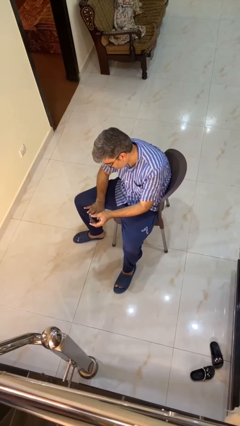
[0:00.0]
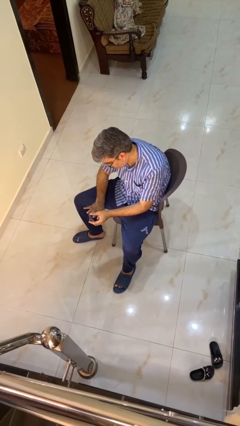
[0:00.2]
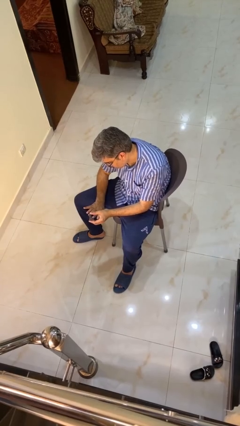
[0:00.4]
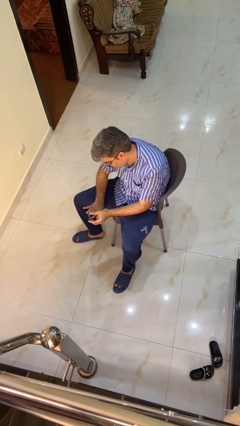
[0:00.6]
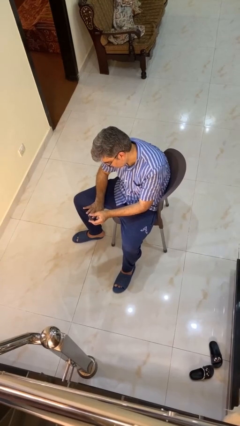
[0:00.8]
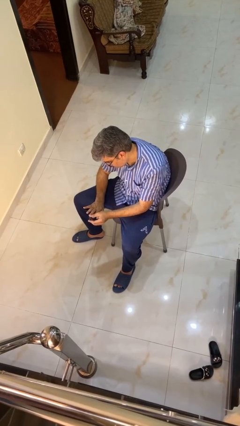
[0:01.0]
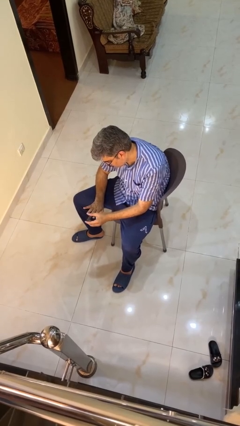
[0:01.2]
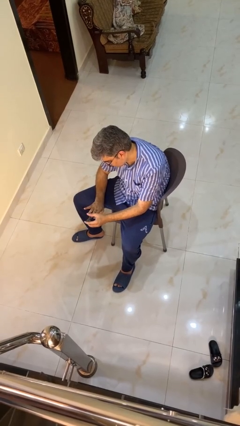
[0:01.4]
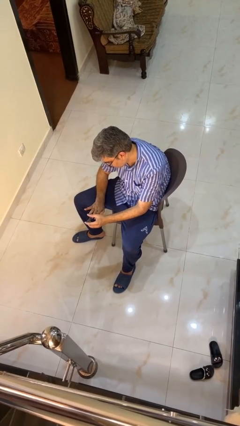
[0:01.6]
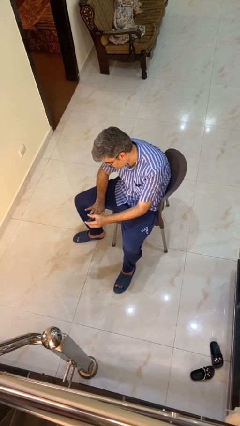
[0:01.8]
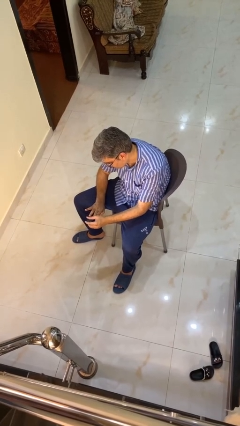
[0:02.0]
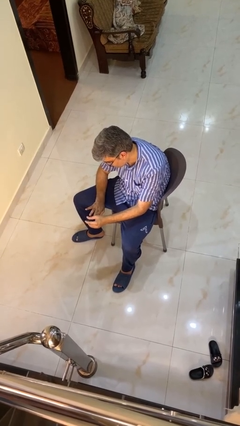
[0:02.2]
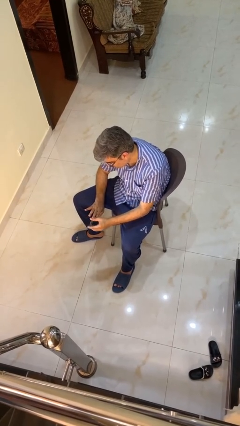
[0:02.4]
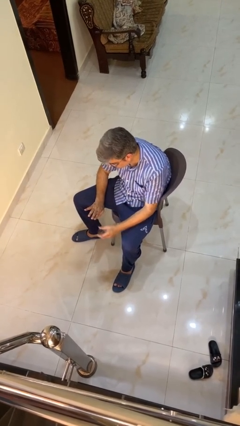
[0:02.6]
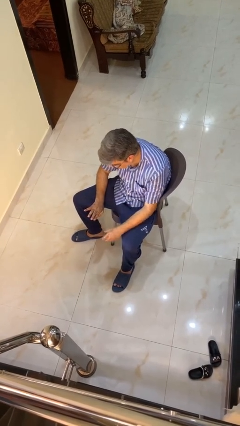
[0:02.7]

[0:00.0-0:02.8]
person clips fingernails

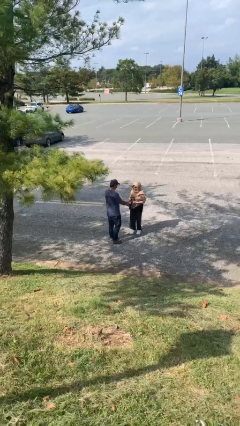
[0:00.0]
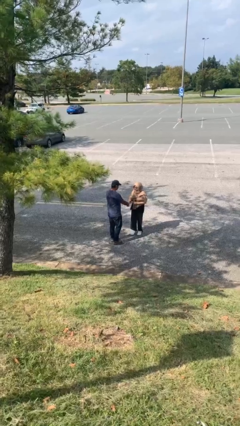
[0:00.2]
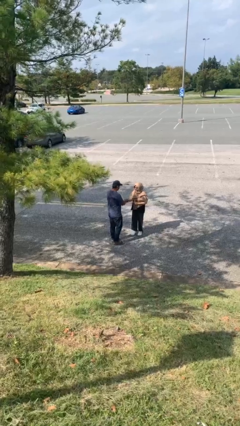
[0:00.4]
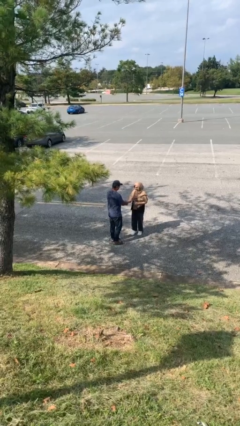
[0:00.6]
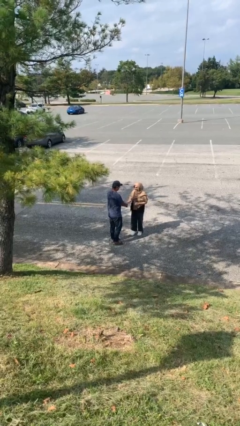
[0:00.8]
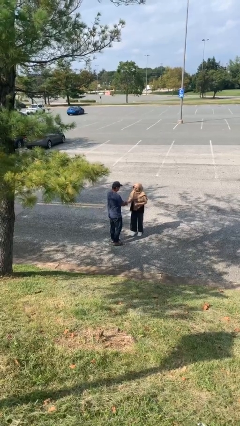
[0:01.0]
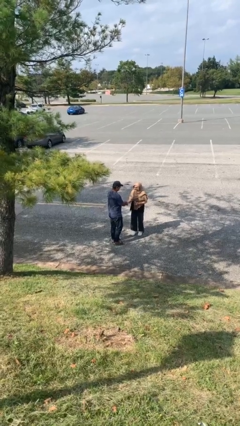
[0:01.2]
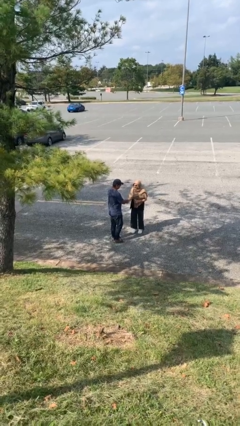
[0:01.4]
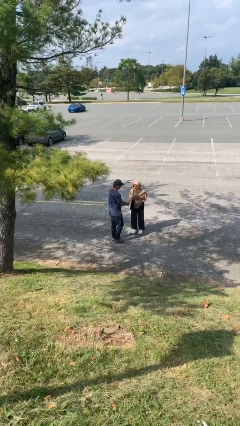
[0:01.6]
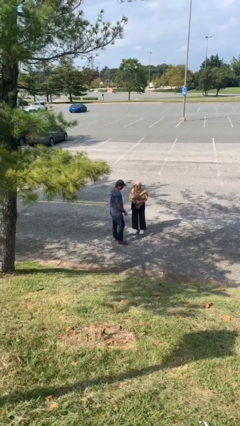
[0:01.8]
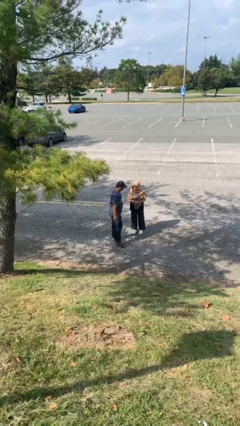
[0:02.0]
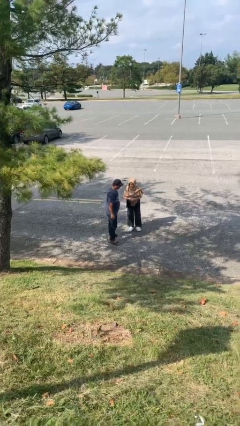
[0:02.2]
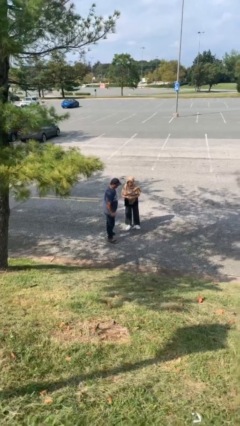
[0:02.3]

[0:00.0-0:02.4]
person shakes hand

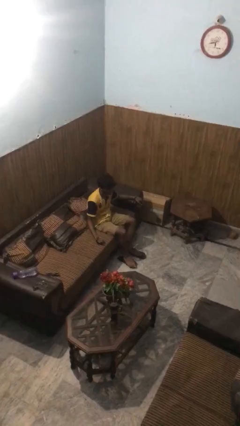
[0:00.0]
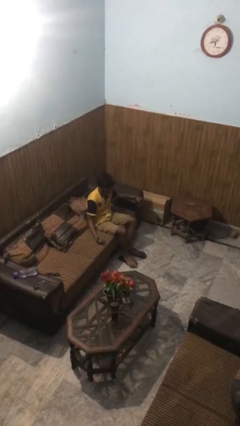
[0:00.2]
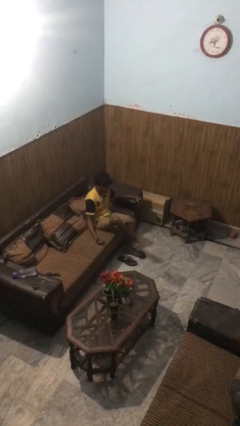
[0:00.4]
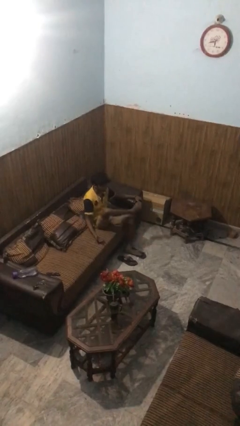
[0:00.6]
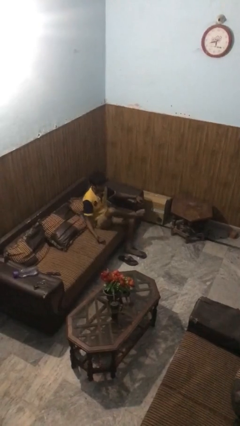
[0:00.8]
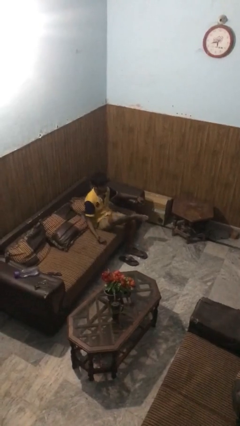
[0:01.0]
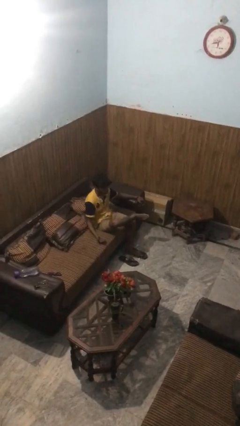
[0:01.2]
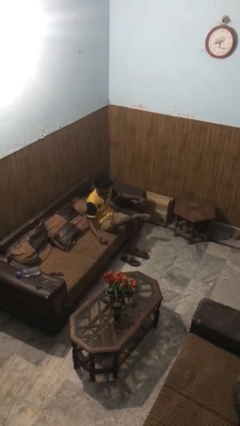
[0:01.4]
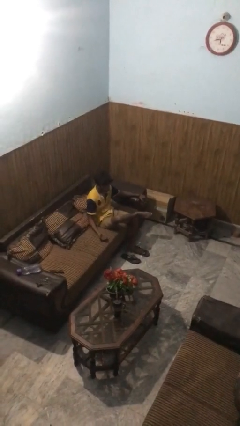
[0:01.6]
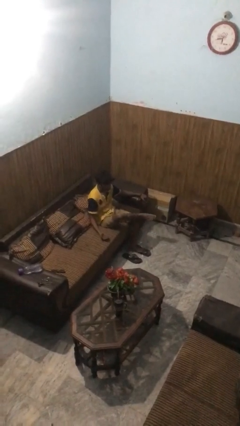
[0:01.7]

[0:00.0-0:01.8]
person crosses legs

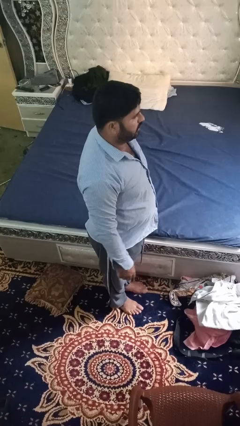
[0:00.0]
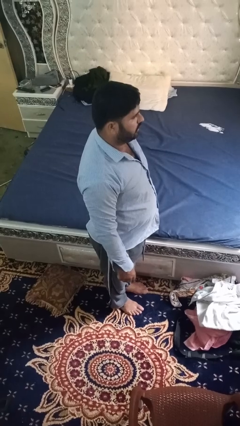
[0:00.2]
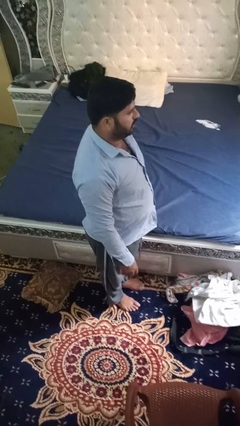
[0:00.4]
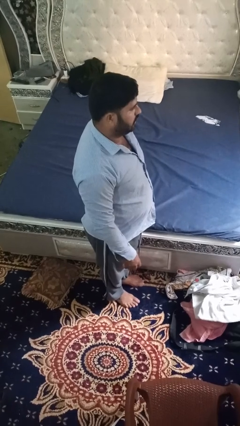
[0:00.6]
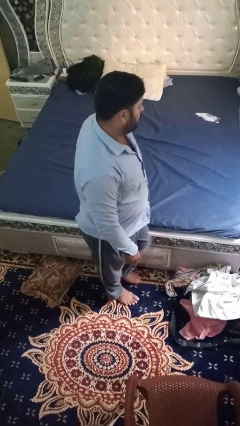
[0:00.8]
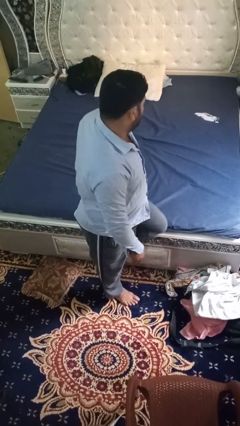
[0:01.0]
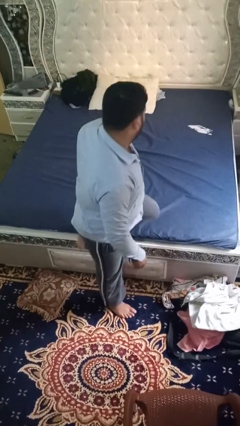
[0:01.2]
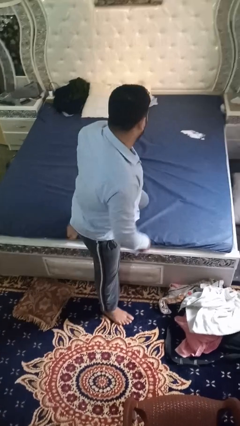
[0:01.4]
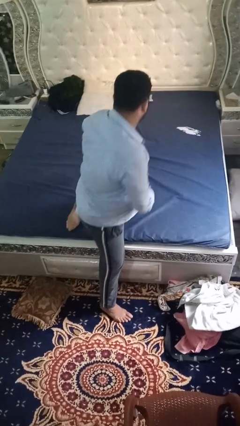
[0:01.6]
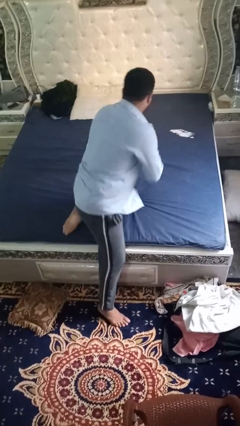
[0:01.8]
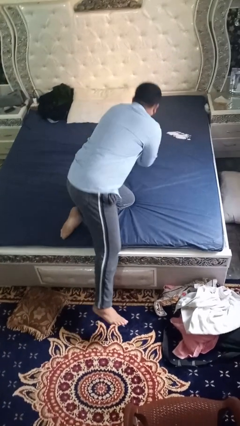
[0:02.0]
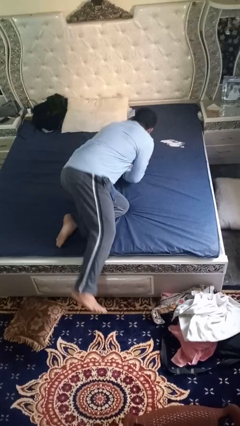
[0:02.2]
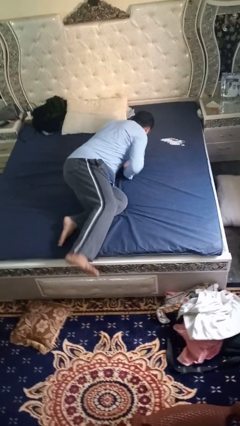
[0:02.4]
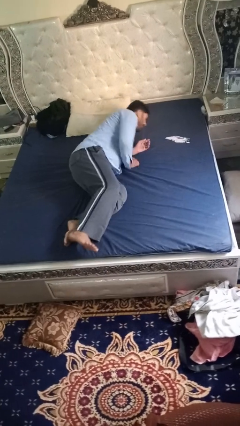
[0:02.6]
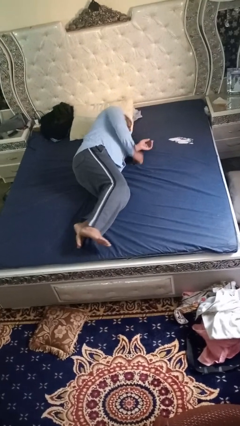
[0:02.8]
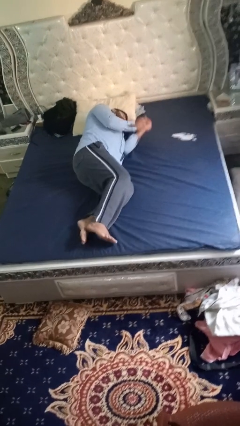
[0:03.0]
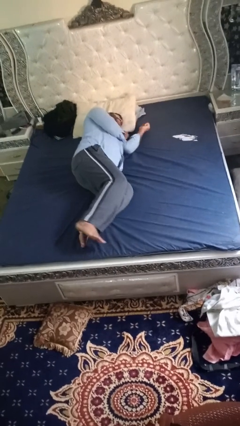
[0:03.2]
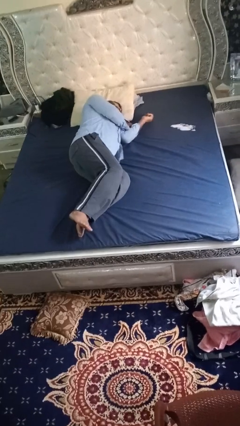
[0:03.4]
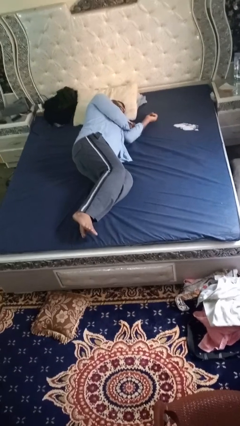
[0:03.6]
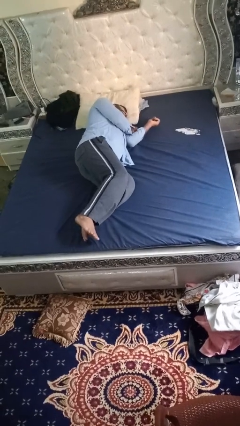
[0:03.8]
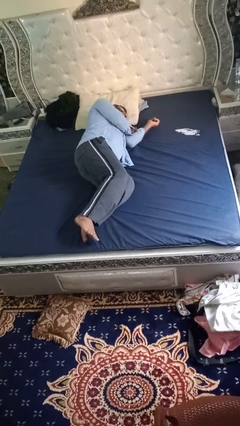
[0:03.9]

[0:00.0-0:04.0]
person lies down on bed

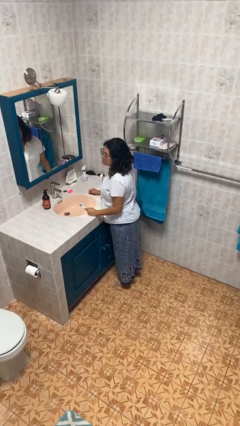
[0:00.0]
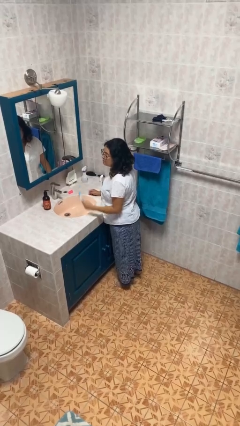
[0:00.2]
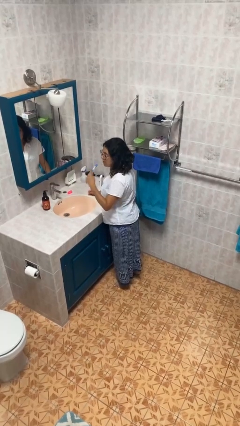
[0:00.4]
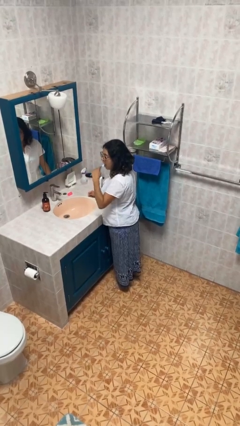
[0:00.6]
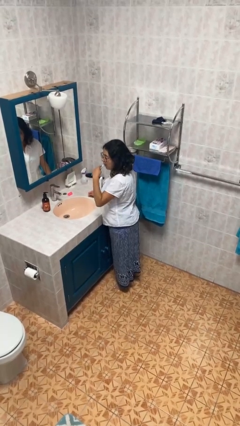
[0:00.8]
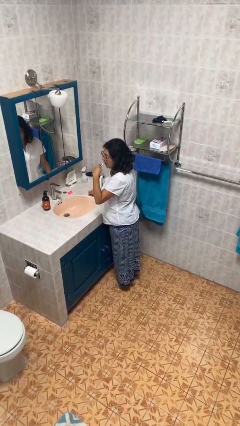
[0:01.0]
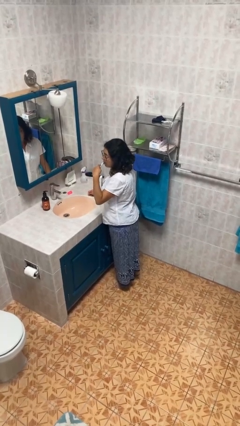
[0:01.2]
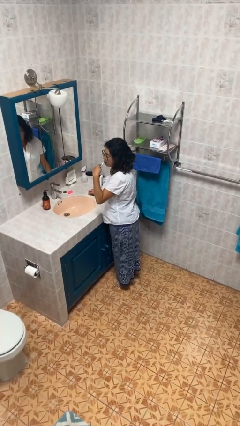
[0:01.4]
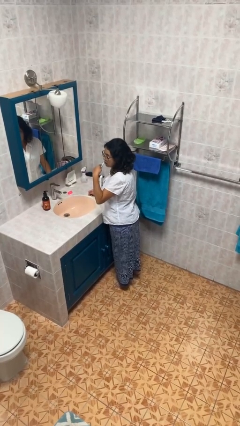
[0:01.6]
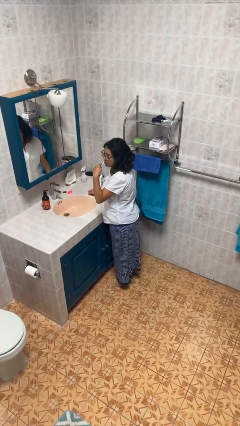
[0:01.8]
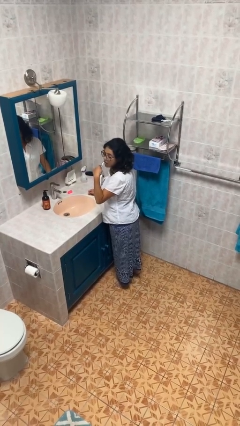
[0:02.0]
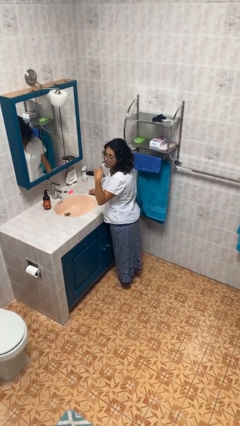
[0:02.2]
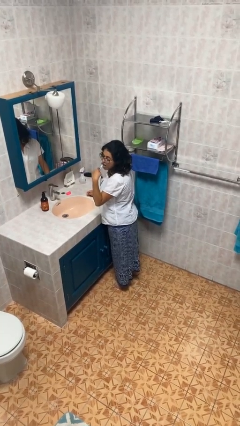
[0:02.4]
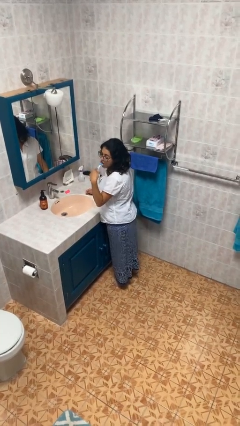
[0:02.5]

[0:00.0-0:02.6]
person brushes teeth

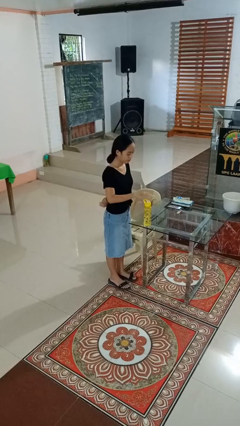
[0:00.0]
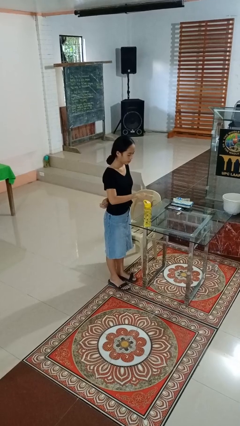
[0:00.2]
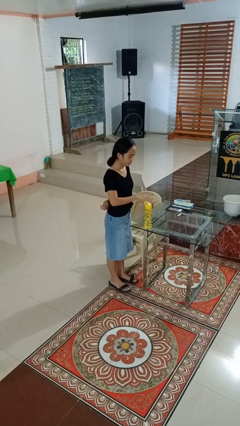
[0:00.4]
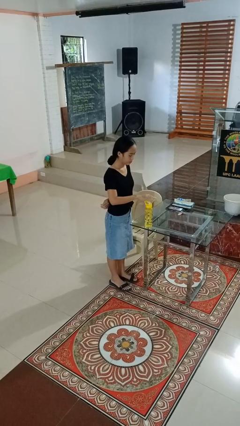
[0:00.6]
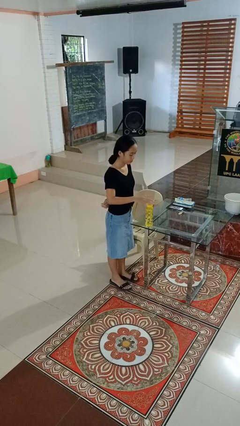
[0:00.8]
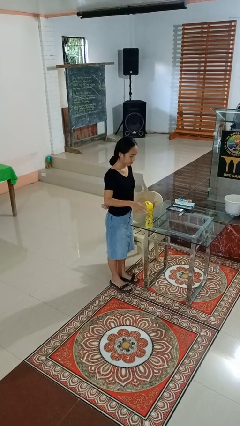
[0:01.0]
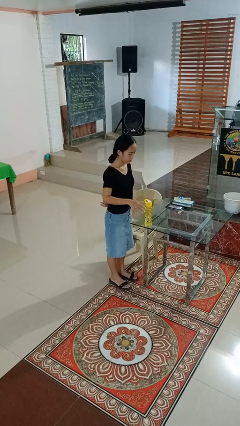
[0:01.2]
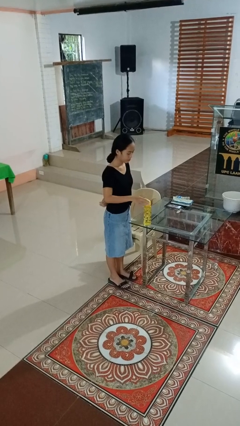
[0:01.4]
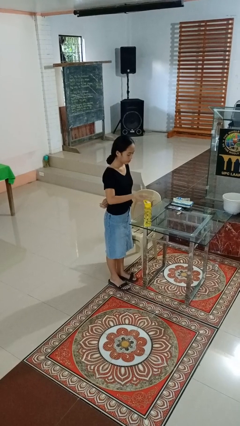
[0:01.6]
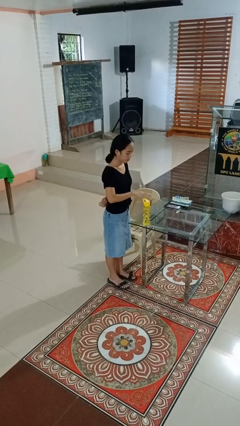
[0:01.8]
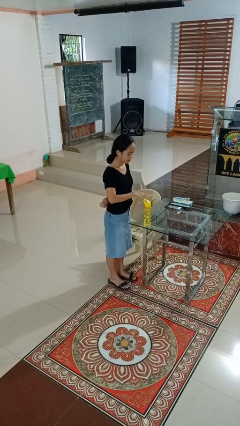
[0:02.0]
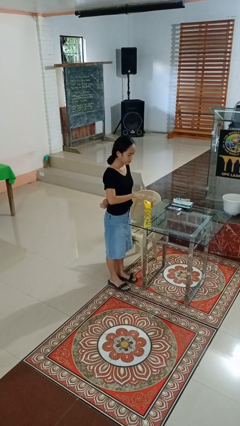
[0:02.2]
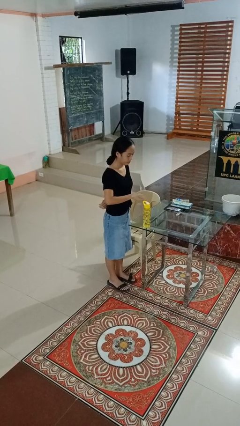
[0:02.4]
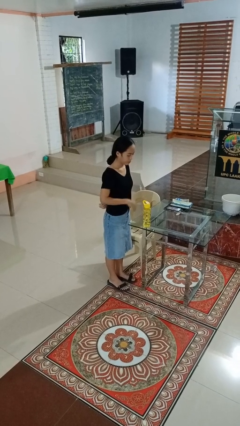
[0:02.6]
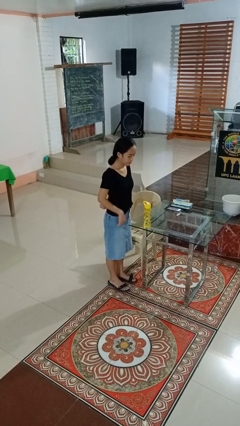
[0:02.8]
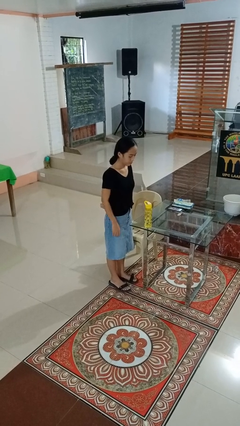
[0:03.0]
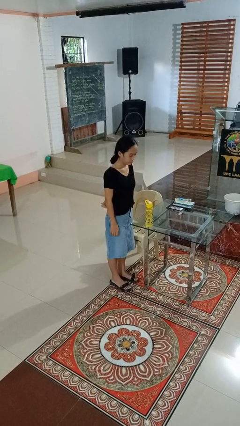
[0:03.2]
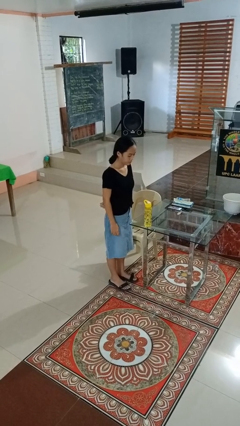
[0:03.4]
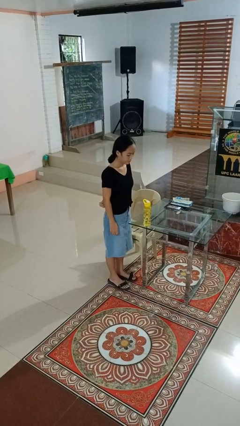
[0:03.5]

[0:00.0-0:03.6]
person waves hand over object

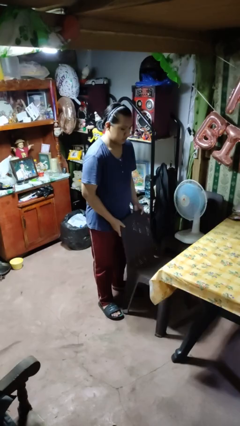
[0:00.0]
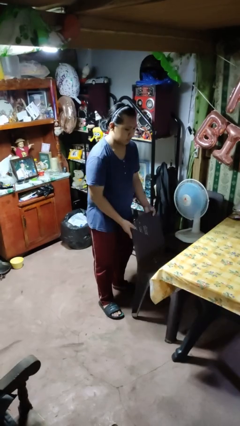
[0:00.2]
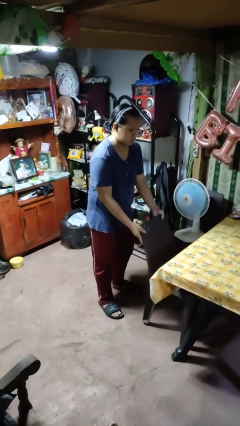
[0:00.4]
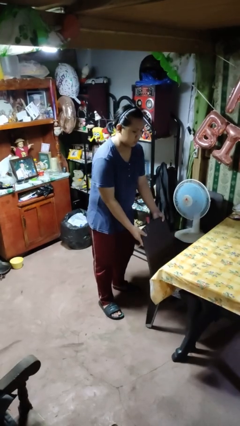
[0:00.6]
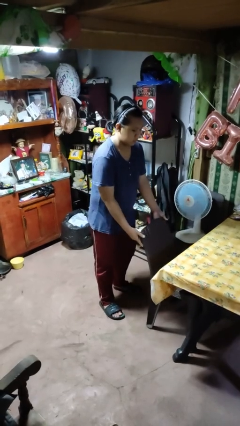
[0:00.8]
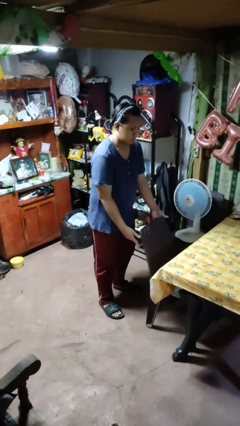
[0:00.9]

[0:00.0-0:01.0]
person pushes in chair
